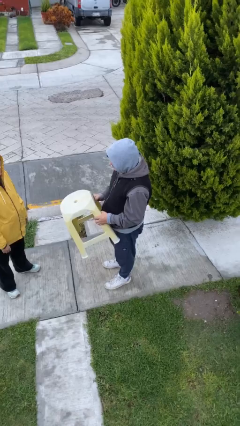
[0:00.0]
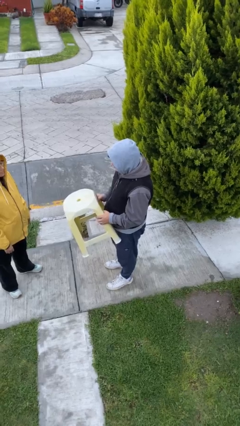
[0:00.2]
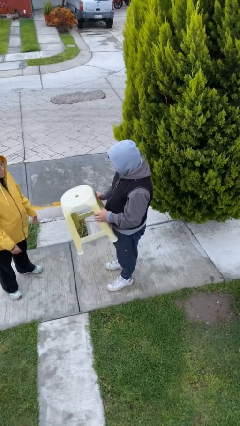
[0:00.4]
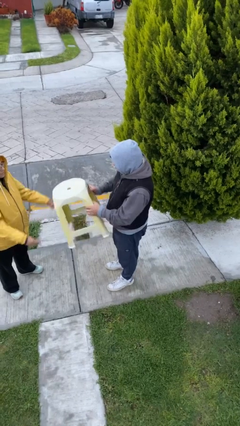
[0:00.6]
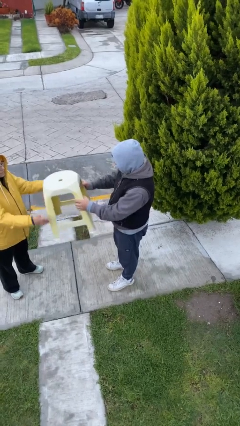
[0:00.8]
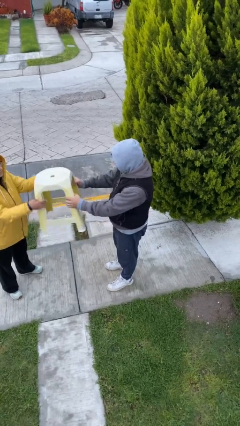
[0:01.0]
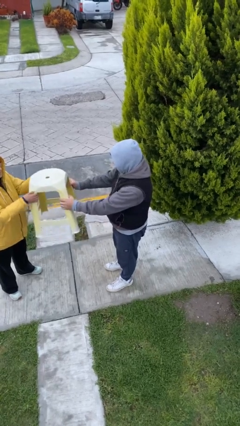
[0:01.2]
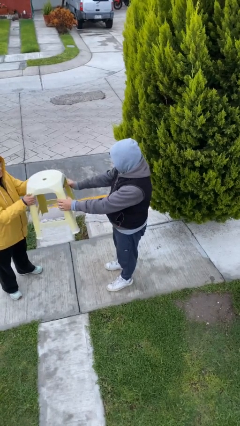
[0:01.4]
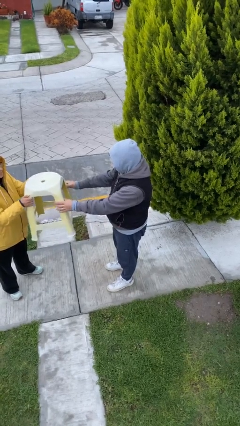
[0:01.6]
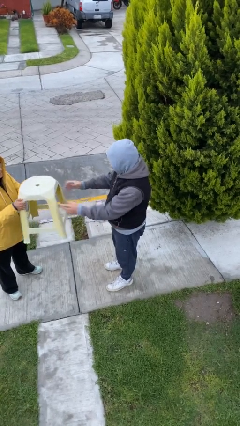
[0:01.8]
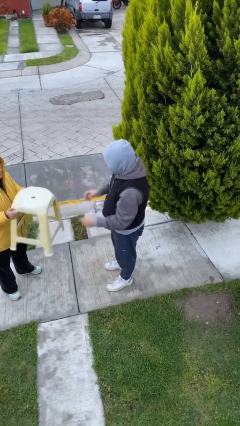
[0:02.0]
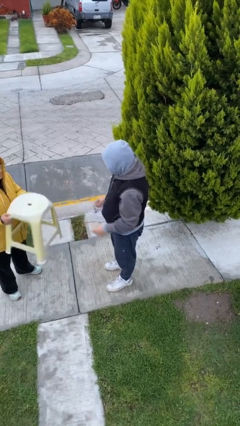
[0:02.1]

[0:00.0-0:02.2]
person transfers object to person

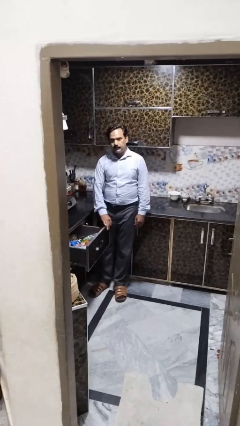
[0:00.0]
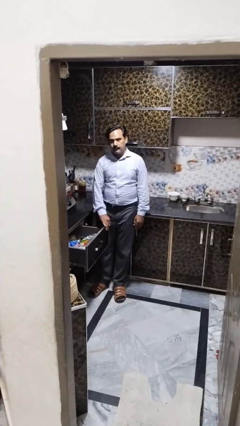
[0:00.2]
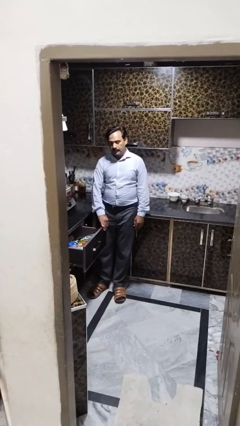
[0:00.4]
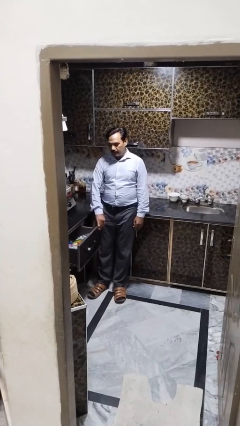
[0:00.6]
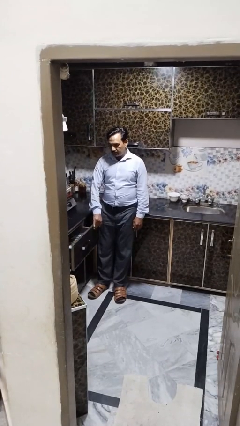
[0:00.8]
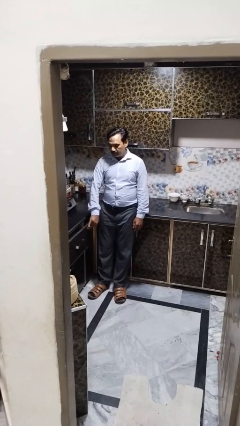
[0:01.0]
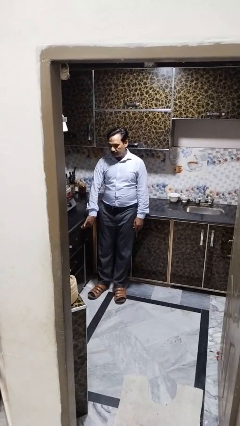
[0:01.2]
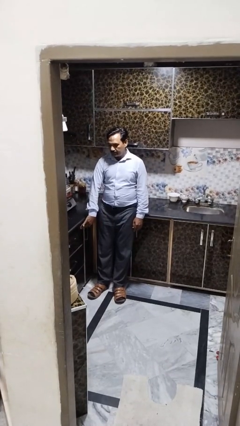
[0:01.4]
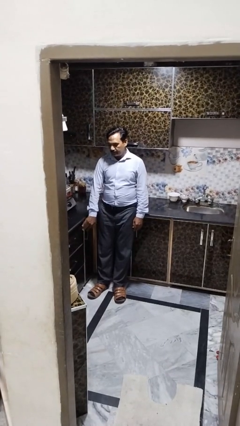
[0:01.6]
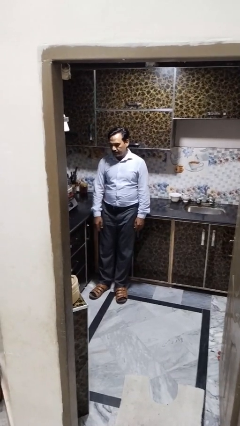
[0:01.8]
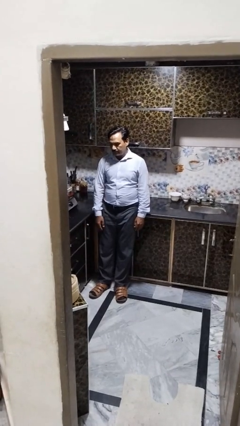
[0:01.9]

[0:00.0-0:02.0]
person closes kitchen drawer

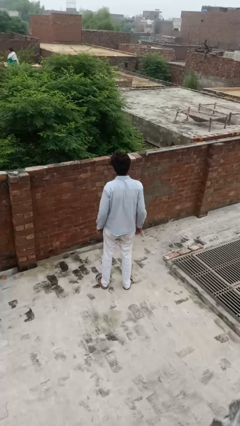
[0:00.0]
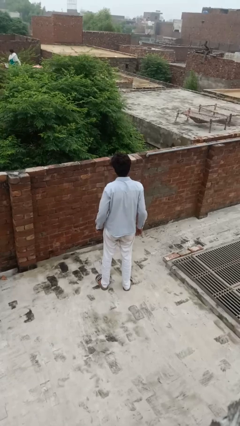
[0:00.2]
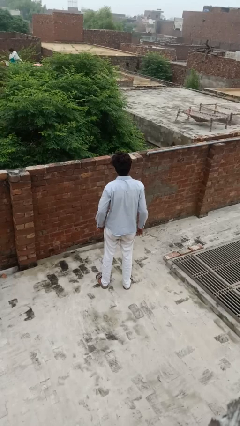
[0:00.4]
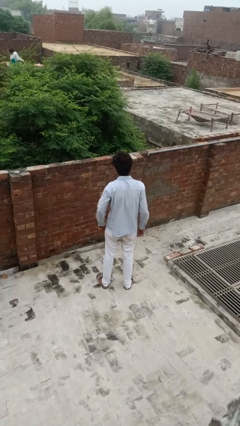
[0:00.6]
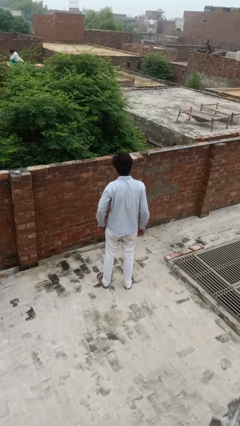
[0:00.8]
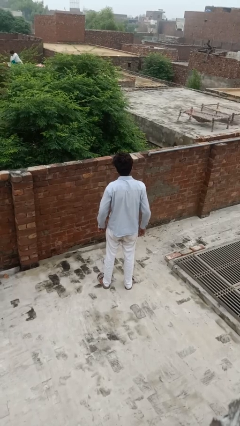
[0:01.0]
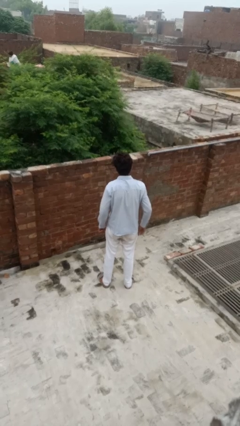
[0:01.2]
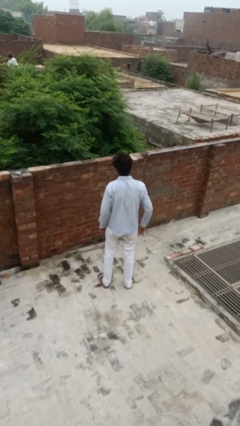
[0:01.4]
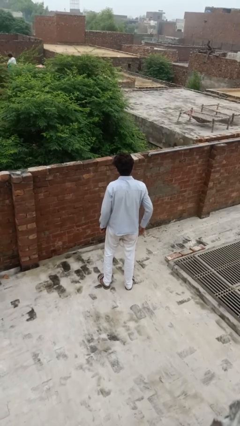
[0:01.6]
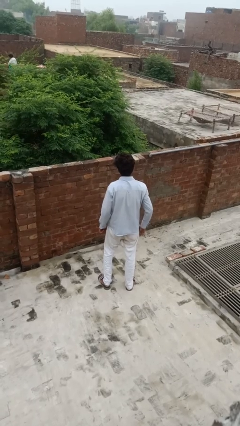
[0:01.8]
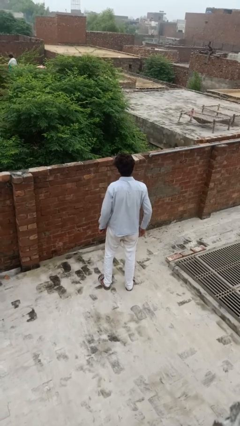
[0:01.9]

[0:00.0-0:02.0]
person gestures thumbs up

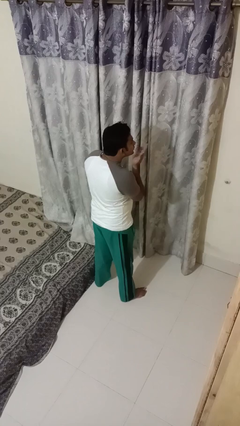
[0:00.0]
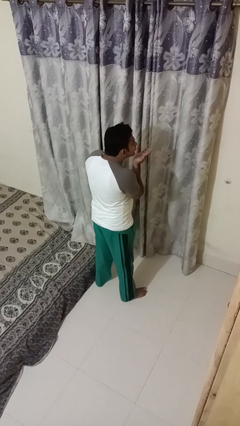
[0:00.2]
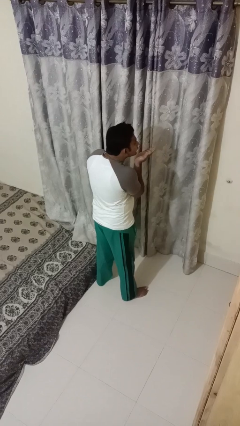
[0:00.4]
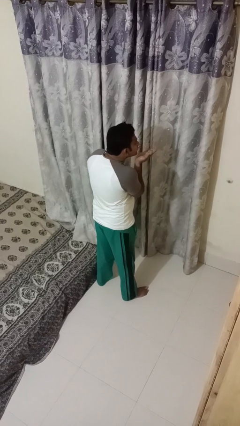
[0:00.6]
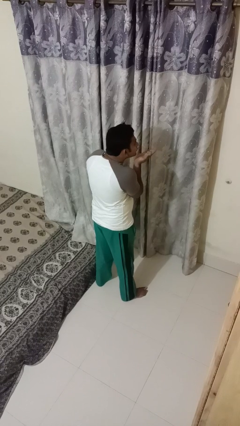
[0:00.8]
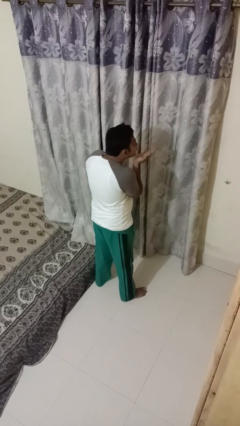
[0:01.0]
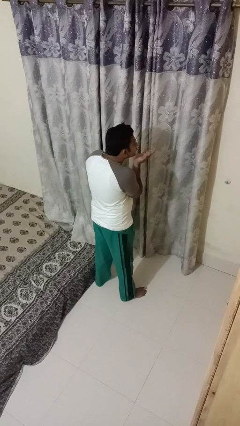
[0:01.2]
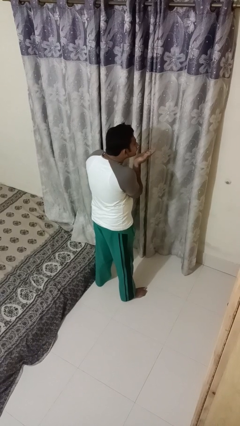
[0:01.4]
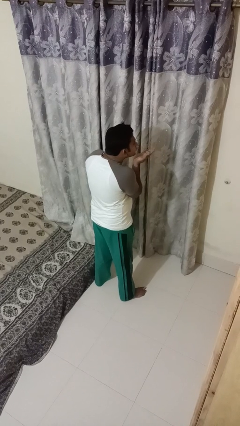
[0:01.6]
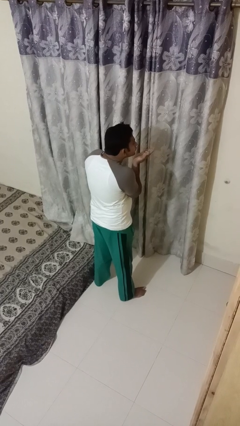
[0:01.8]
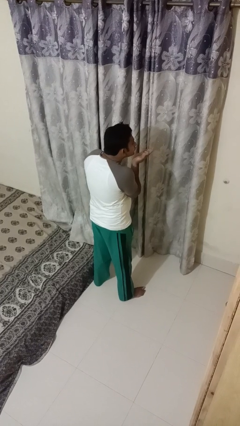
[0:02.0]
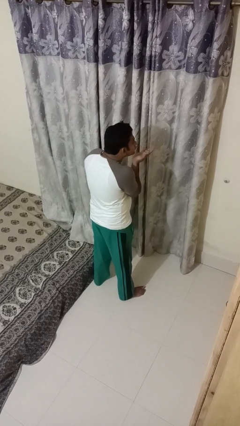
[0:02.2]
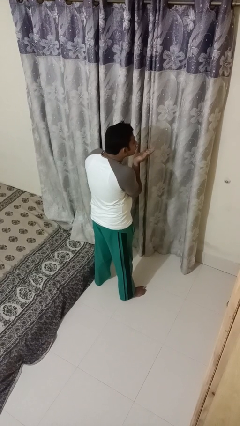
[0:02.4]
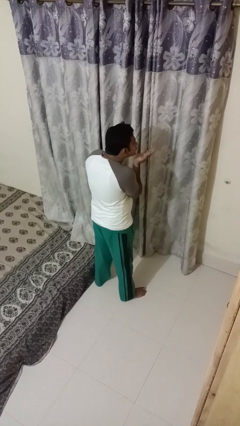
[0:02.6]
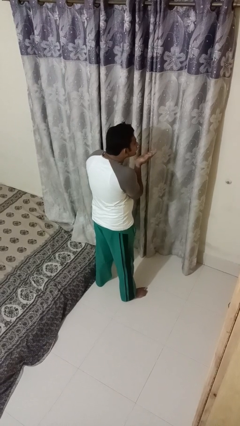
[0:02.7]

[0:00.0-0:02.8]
person gestures blow kiss

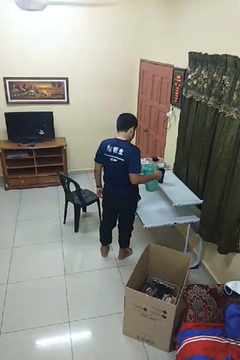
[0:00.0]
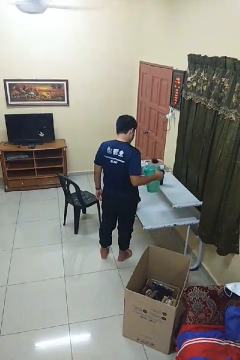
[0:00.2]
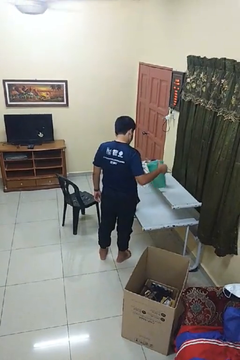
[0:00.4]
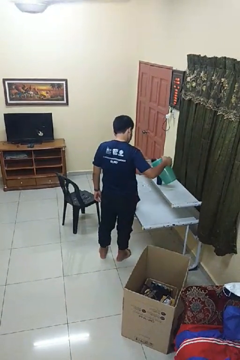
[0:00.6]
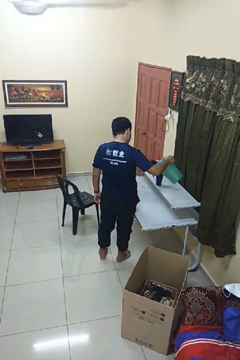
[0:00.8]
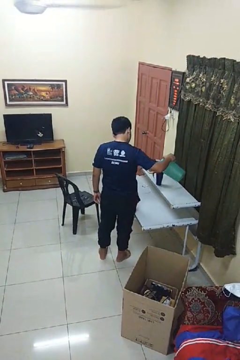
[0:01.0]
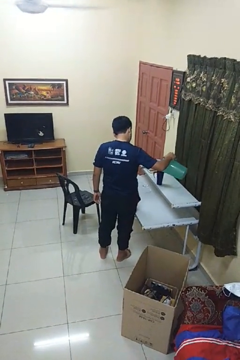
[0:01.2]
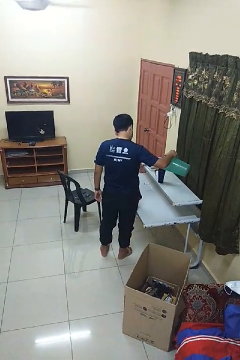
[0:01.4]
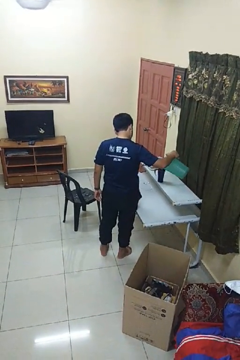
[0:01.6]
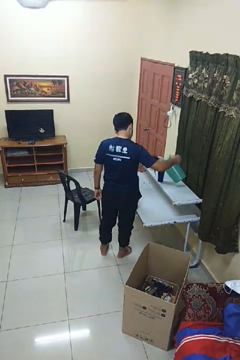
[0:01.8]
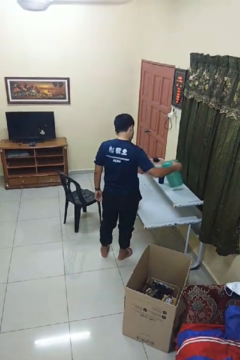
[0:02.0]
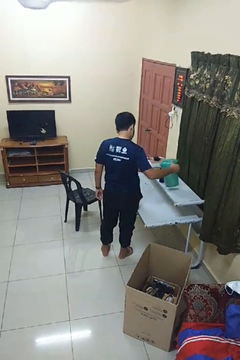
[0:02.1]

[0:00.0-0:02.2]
person pours coffee into mug

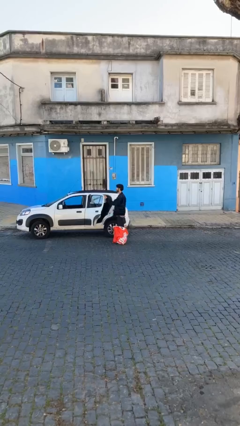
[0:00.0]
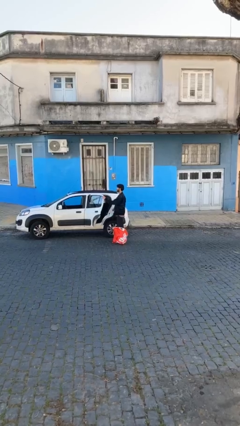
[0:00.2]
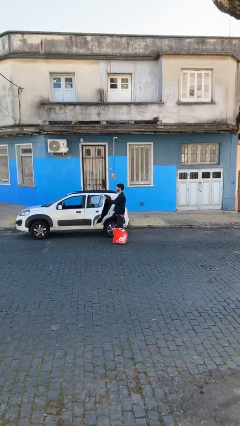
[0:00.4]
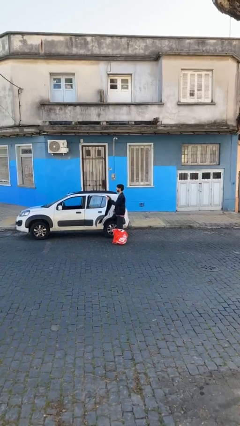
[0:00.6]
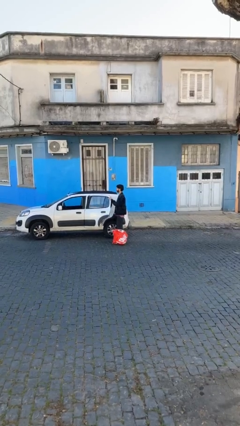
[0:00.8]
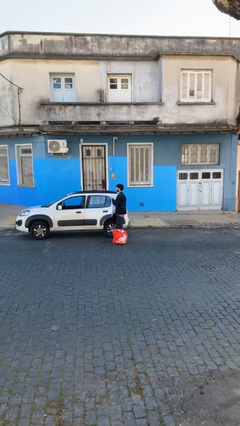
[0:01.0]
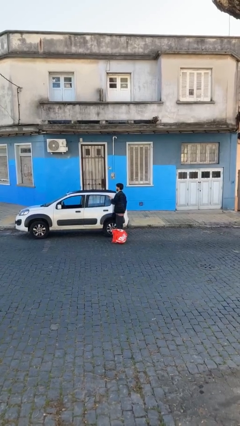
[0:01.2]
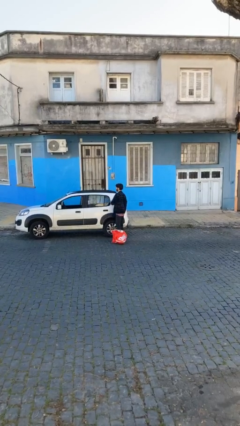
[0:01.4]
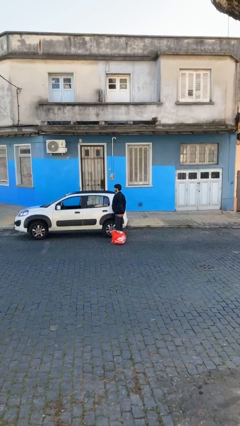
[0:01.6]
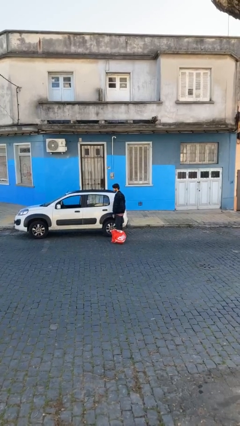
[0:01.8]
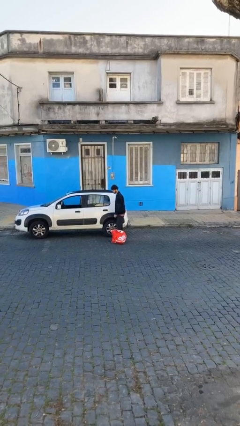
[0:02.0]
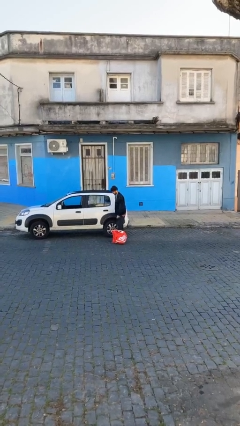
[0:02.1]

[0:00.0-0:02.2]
person closes car door

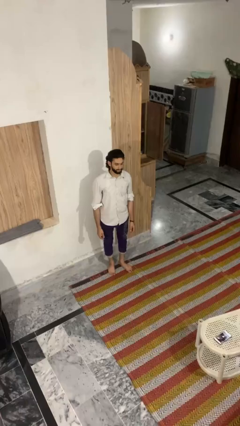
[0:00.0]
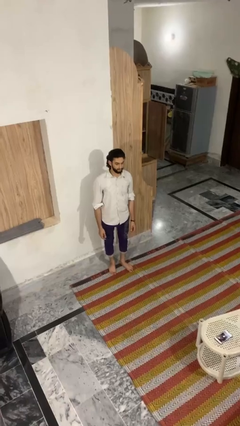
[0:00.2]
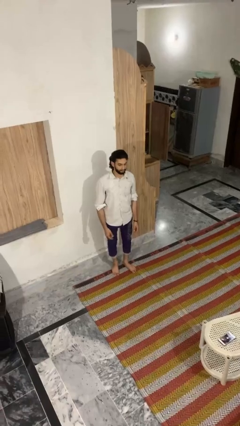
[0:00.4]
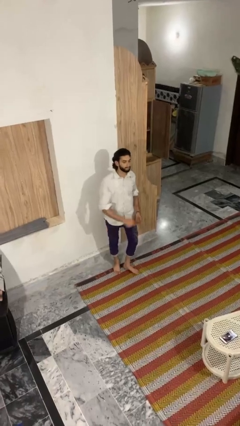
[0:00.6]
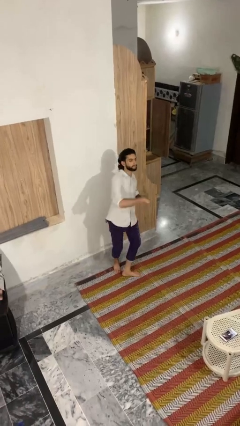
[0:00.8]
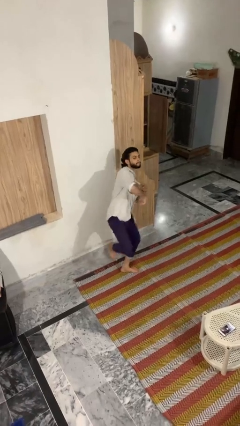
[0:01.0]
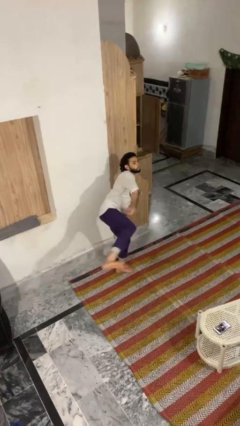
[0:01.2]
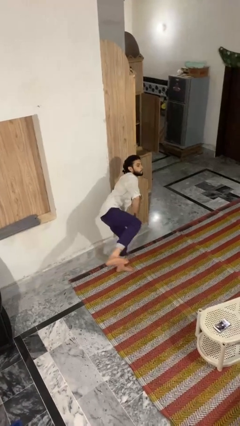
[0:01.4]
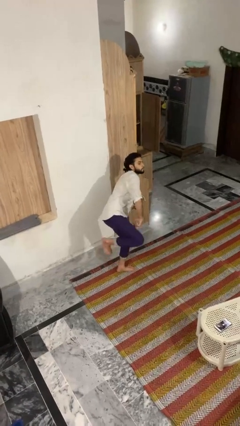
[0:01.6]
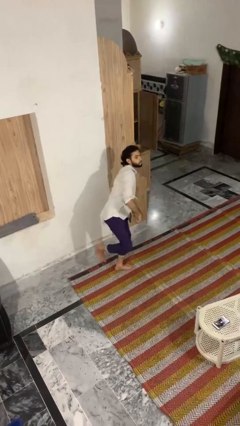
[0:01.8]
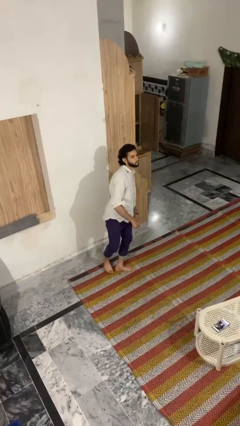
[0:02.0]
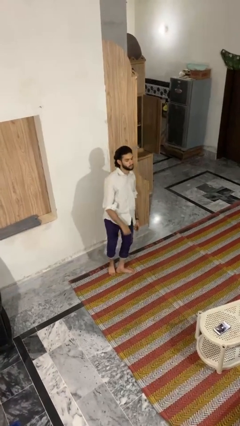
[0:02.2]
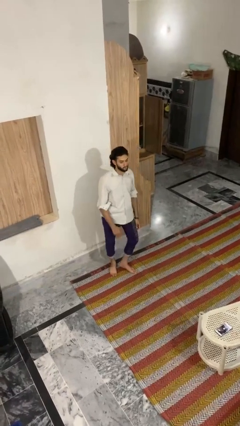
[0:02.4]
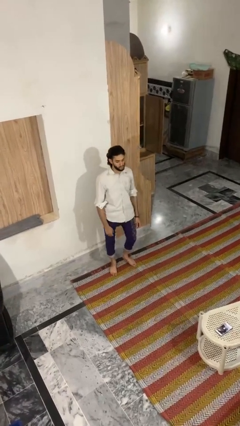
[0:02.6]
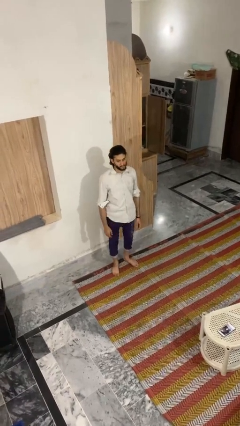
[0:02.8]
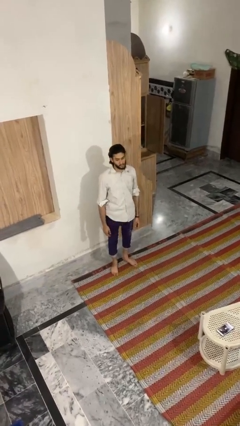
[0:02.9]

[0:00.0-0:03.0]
person karate kicks

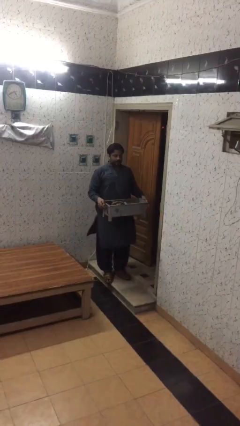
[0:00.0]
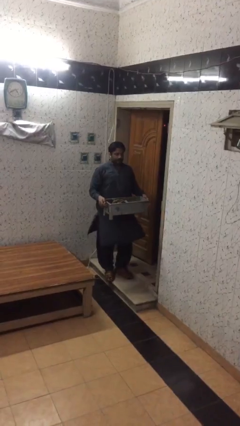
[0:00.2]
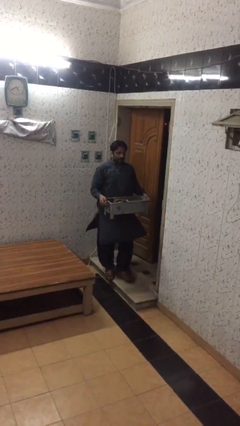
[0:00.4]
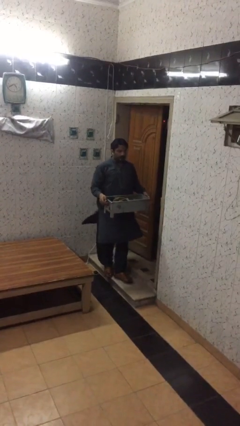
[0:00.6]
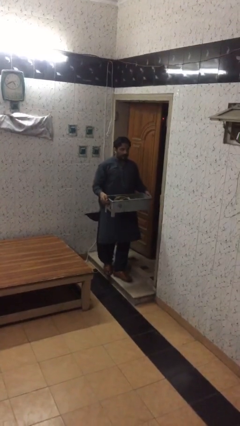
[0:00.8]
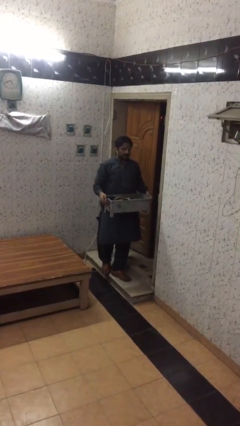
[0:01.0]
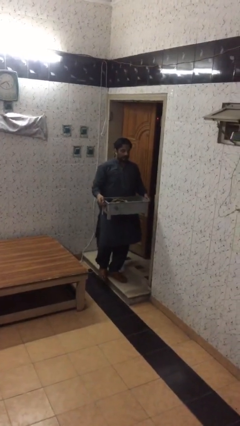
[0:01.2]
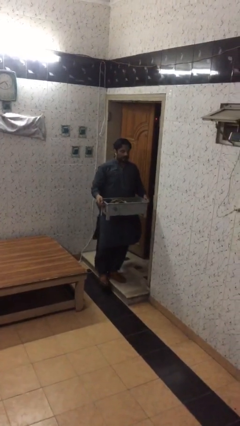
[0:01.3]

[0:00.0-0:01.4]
person carries heavy object
